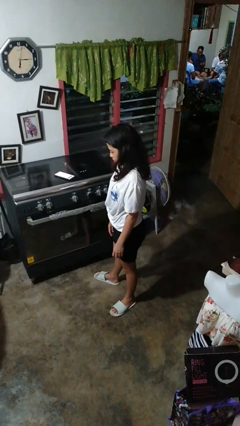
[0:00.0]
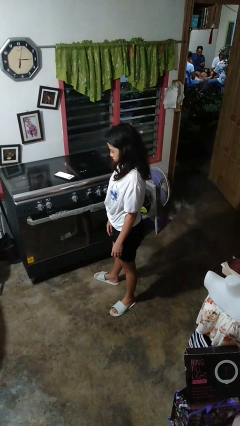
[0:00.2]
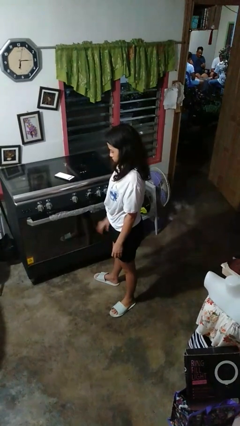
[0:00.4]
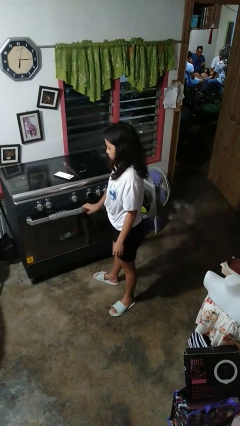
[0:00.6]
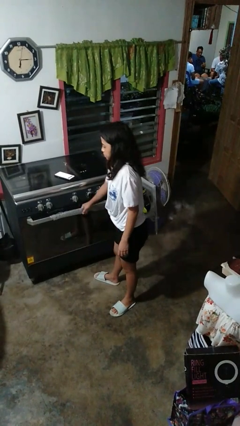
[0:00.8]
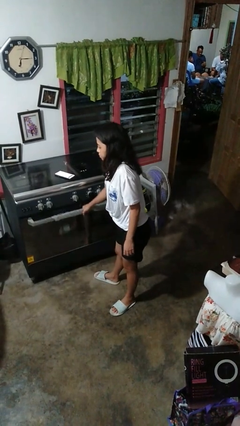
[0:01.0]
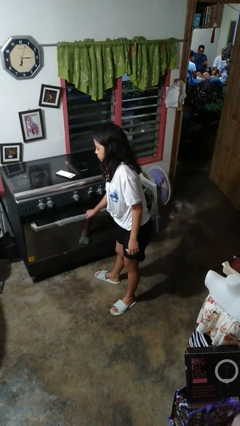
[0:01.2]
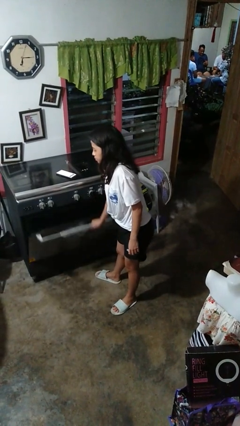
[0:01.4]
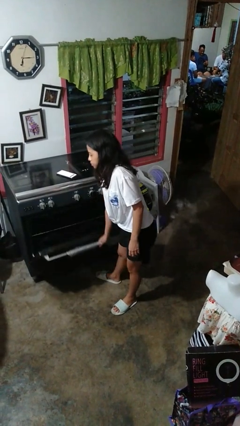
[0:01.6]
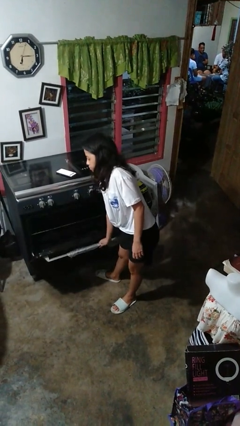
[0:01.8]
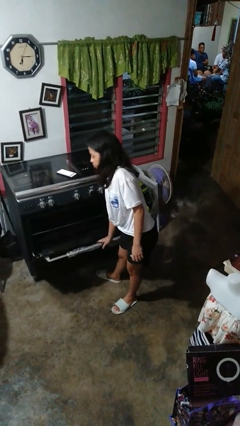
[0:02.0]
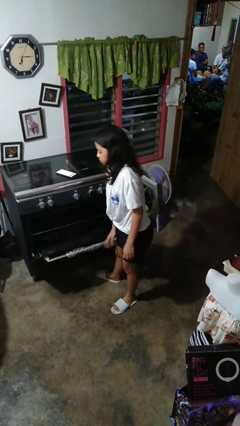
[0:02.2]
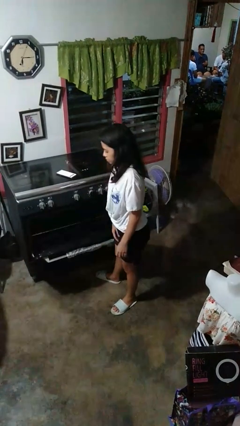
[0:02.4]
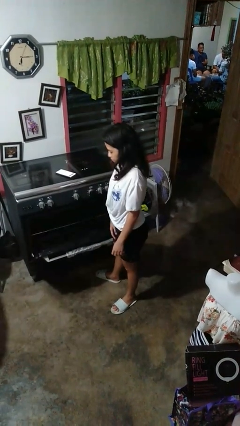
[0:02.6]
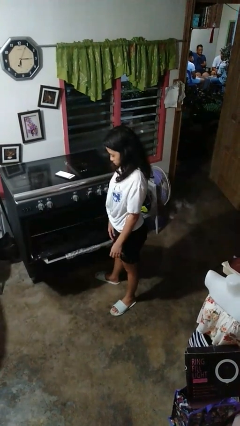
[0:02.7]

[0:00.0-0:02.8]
person opens oven door

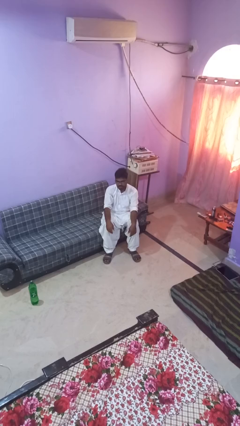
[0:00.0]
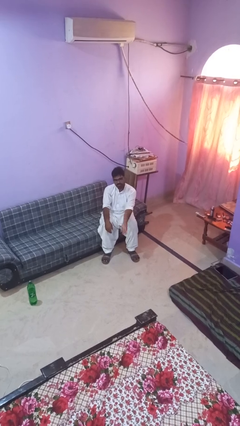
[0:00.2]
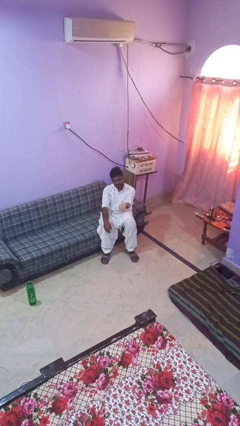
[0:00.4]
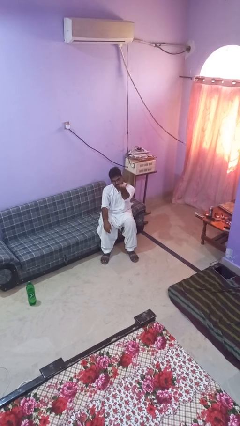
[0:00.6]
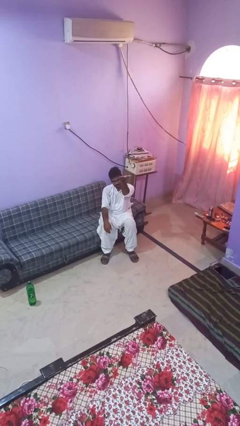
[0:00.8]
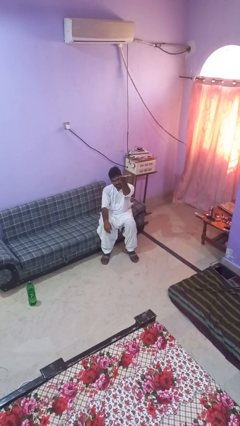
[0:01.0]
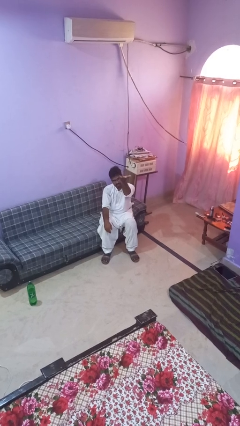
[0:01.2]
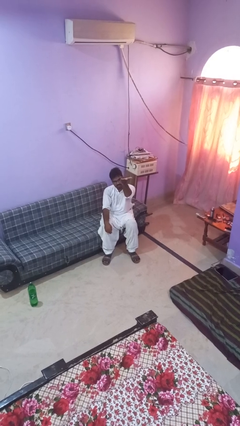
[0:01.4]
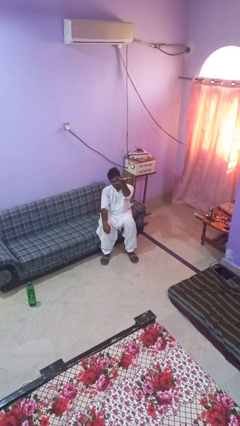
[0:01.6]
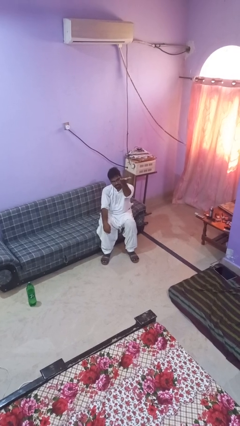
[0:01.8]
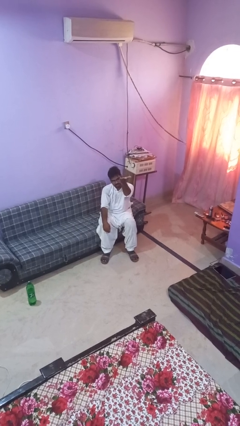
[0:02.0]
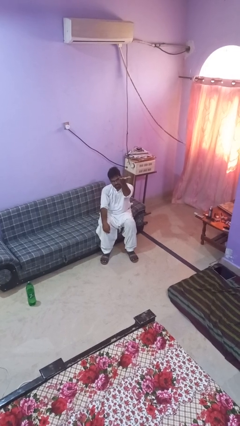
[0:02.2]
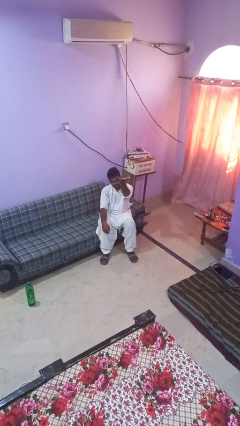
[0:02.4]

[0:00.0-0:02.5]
person gestures swipe up

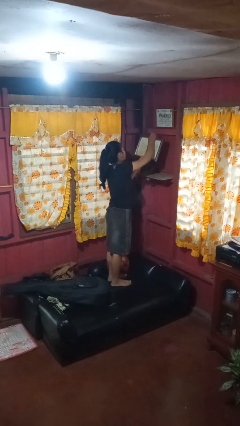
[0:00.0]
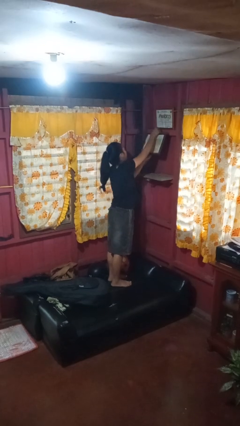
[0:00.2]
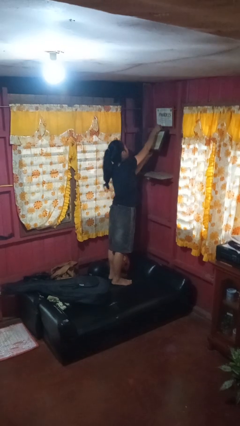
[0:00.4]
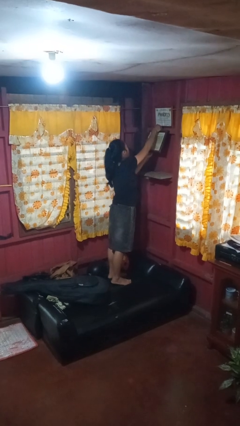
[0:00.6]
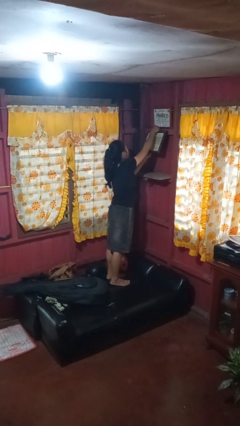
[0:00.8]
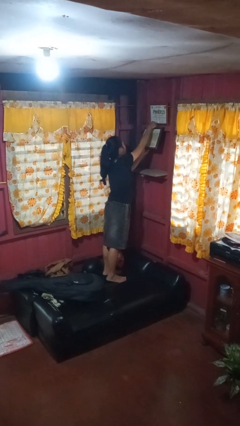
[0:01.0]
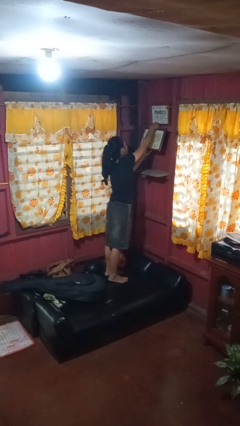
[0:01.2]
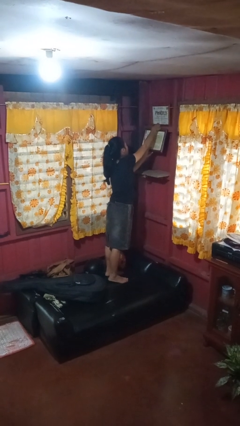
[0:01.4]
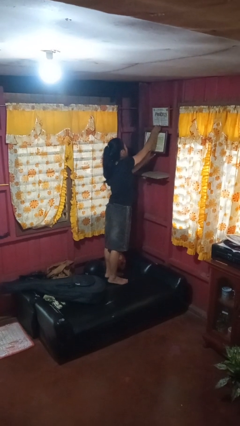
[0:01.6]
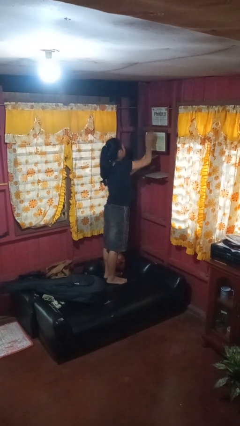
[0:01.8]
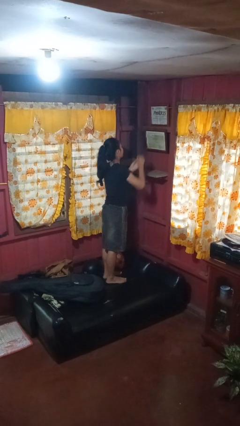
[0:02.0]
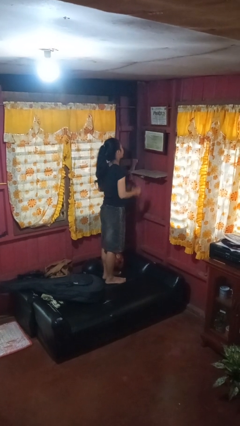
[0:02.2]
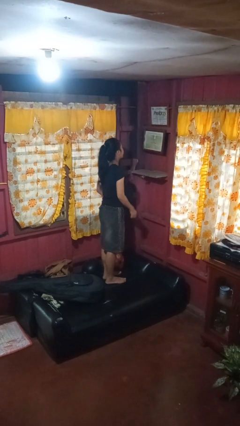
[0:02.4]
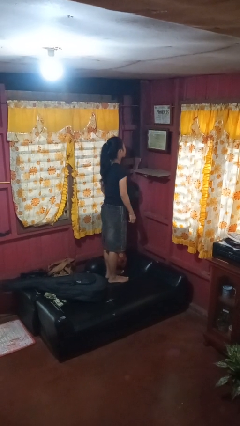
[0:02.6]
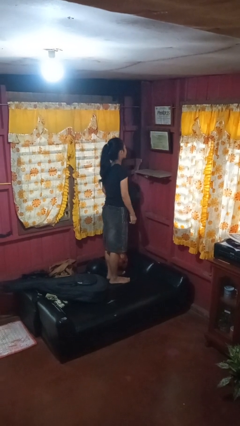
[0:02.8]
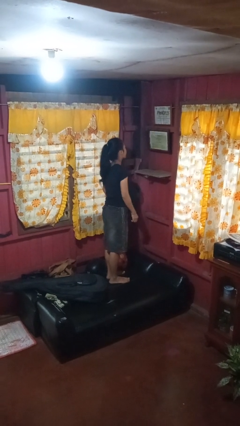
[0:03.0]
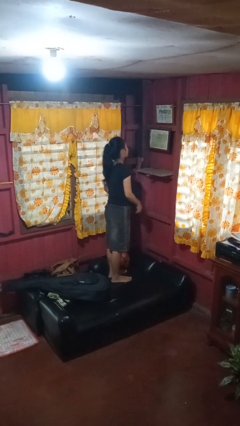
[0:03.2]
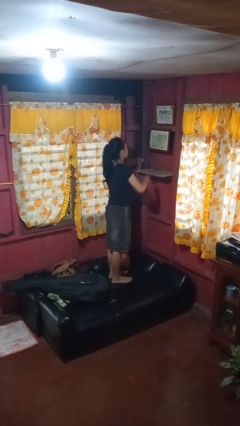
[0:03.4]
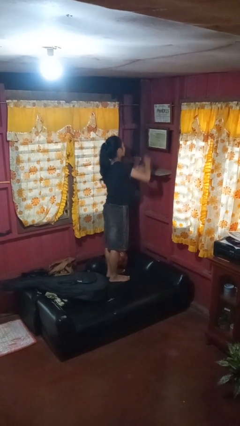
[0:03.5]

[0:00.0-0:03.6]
person puts up picture frame

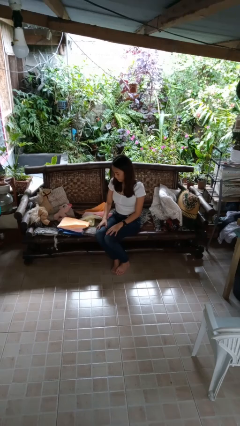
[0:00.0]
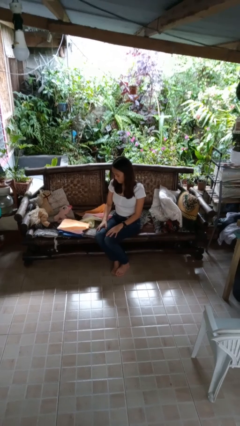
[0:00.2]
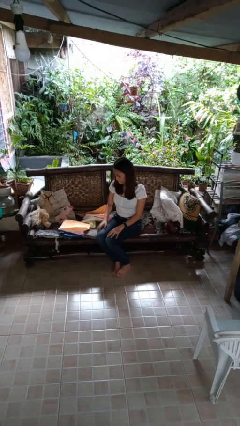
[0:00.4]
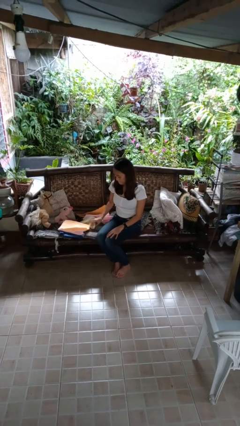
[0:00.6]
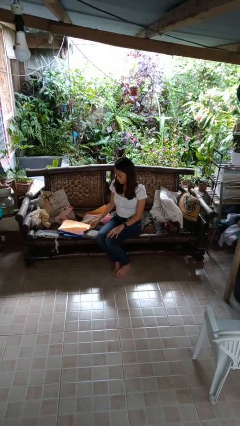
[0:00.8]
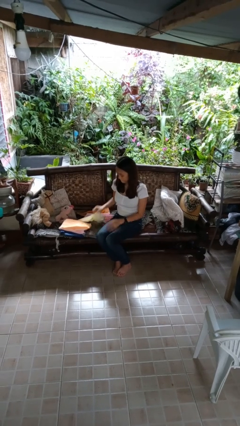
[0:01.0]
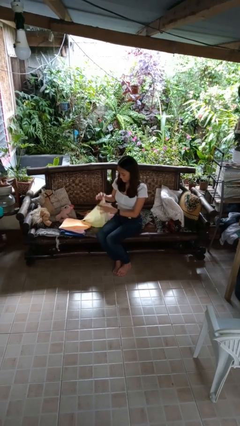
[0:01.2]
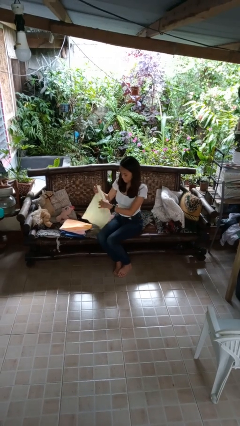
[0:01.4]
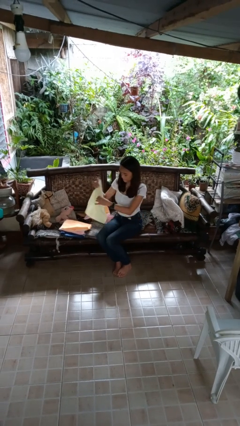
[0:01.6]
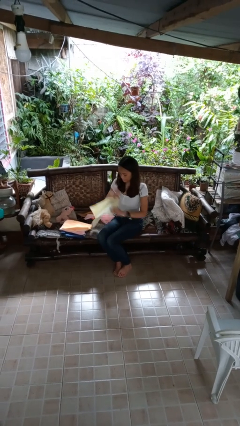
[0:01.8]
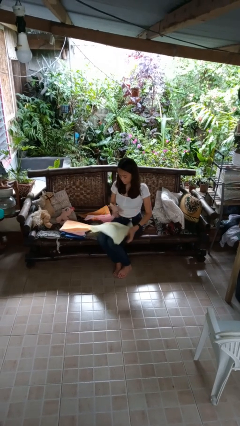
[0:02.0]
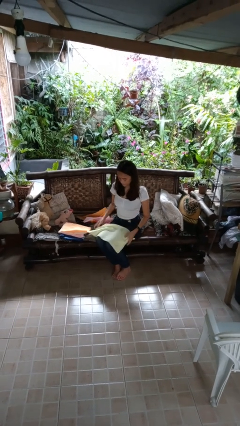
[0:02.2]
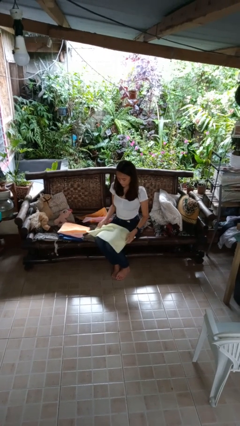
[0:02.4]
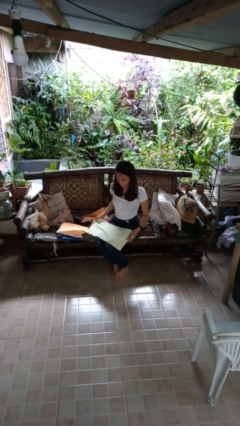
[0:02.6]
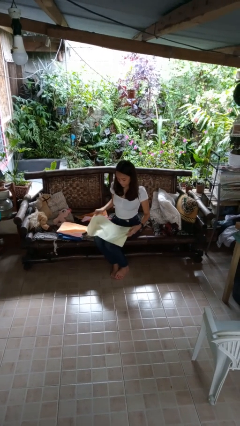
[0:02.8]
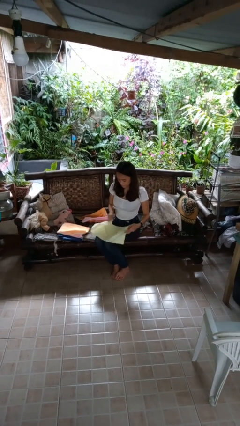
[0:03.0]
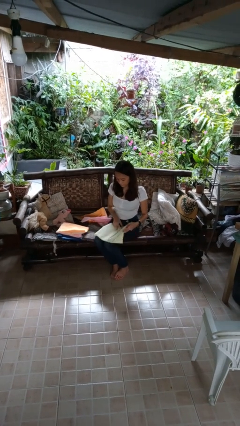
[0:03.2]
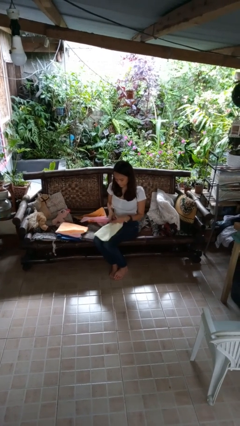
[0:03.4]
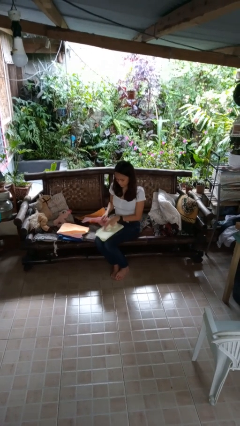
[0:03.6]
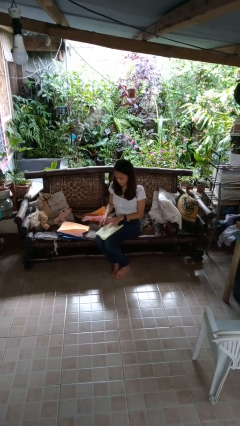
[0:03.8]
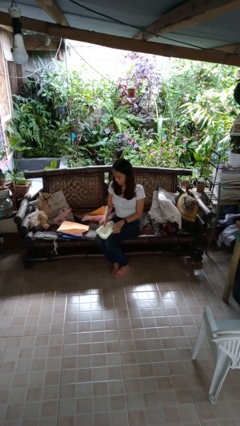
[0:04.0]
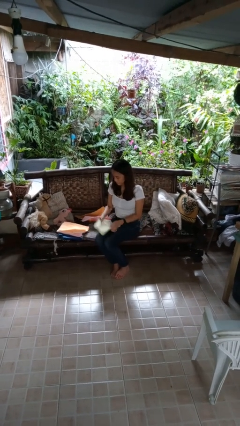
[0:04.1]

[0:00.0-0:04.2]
person folds towel

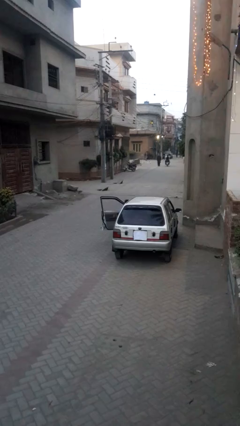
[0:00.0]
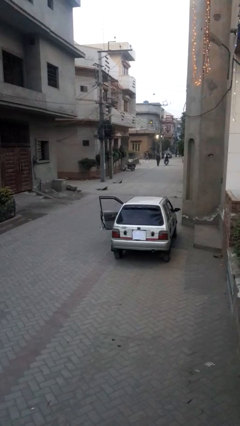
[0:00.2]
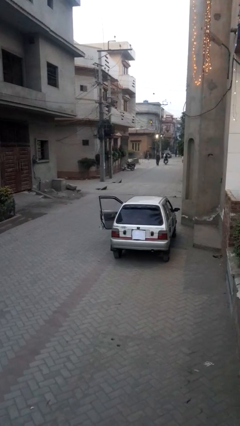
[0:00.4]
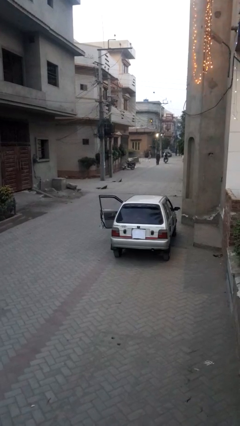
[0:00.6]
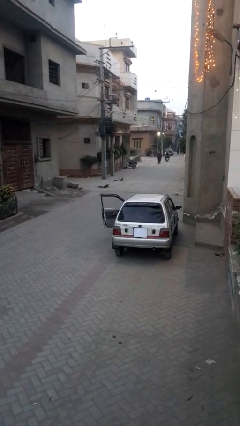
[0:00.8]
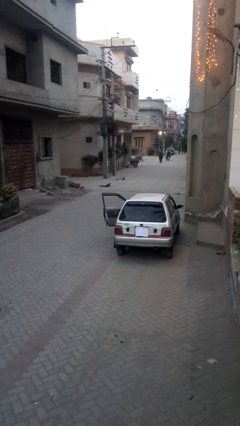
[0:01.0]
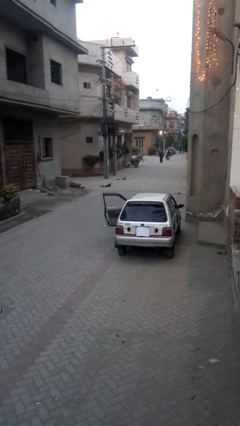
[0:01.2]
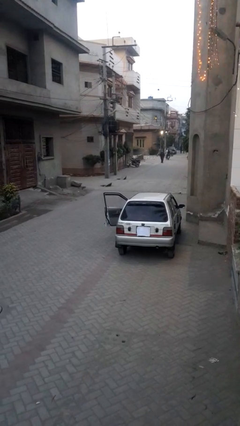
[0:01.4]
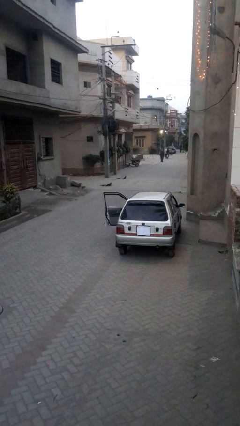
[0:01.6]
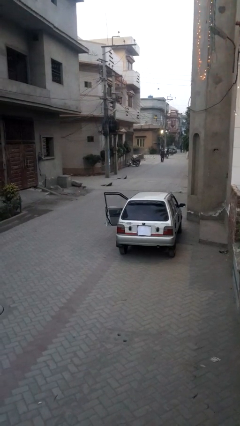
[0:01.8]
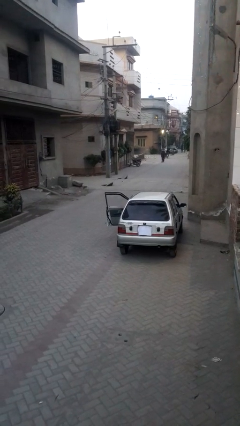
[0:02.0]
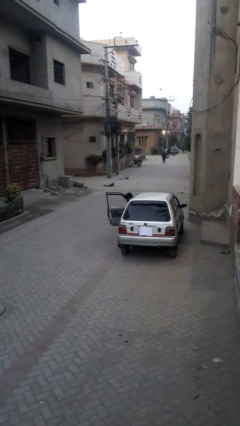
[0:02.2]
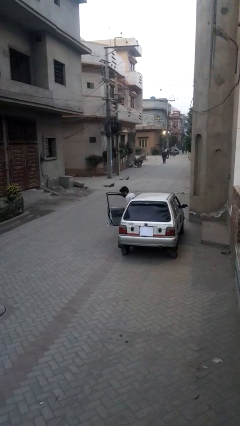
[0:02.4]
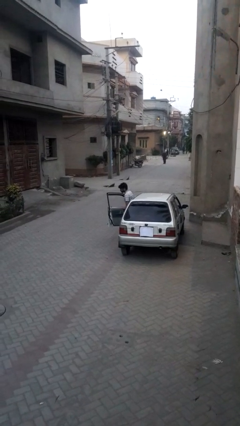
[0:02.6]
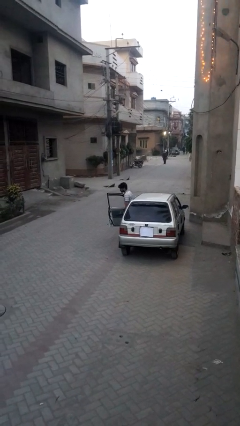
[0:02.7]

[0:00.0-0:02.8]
person enters car

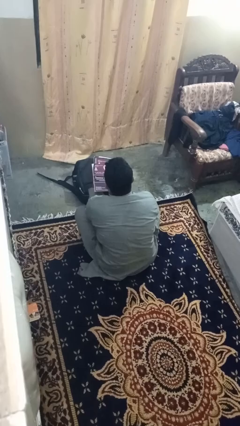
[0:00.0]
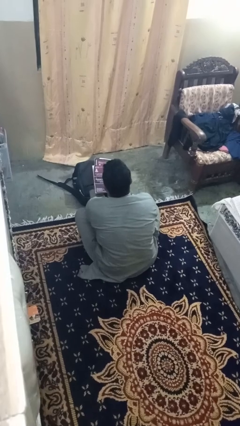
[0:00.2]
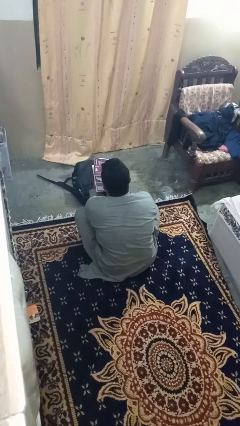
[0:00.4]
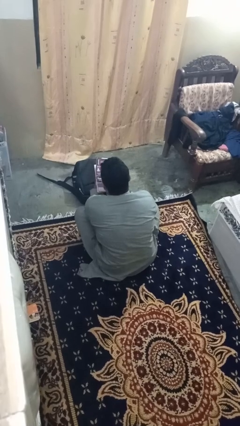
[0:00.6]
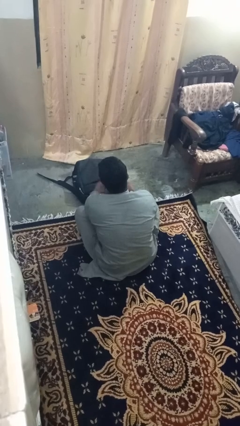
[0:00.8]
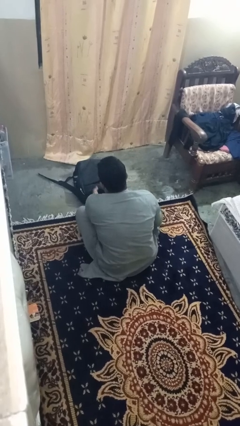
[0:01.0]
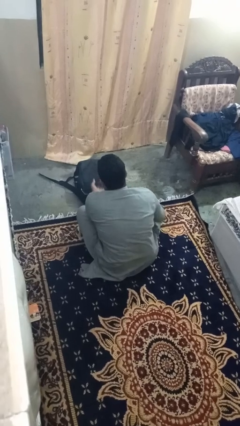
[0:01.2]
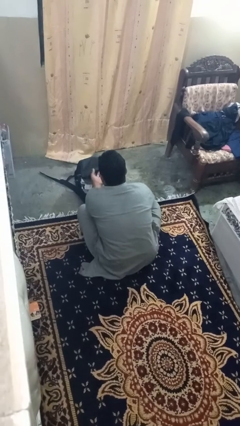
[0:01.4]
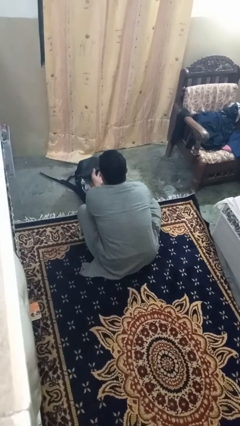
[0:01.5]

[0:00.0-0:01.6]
person puts object into bag

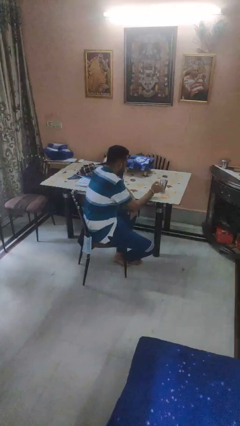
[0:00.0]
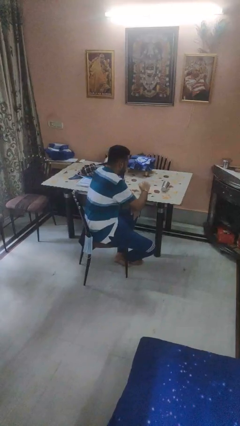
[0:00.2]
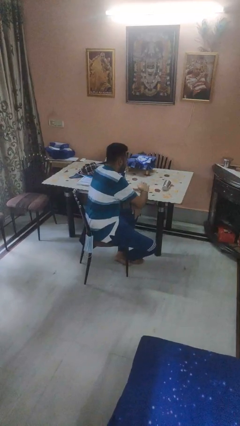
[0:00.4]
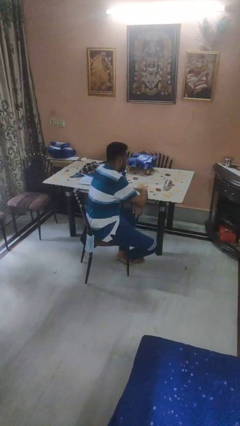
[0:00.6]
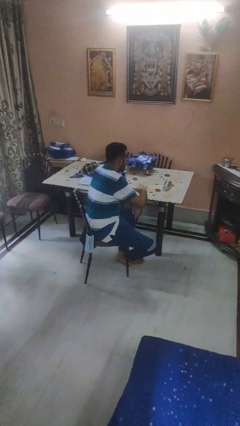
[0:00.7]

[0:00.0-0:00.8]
person knocks over glass
